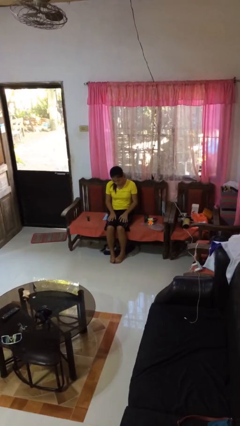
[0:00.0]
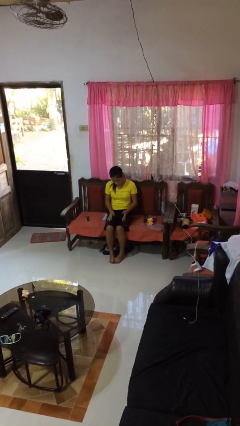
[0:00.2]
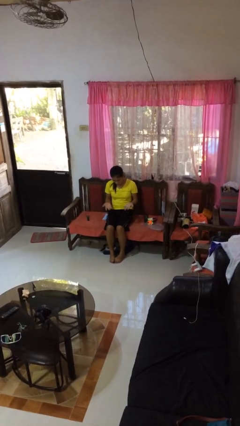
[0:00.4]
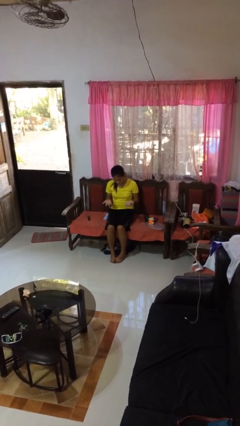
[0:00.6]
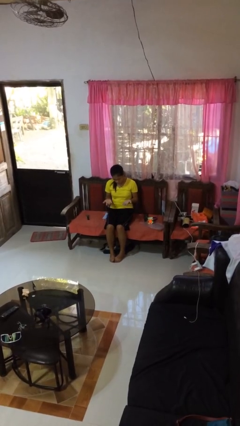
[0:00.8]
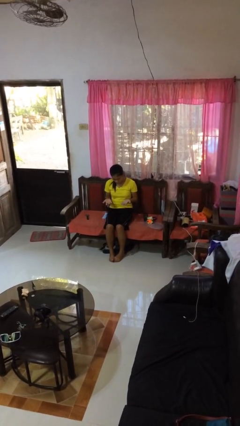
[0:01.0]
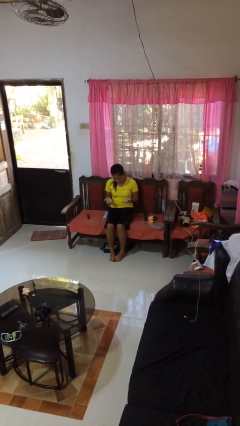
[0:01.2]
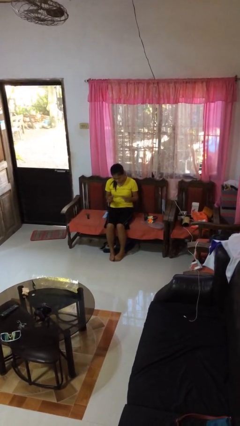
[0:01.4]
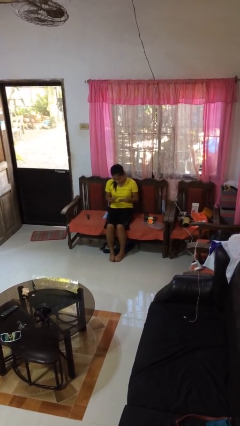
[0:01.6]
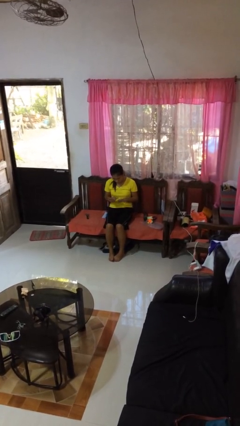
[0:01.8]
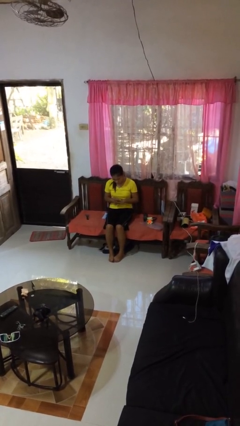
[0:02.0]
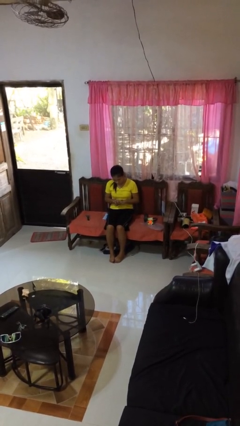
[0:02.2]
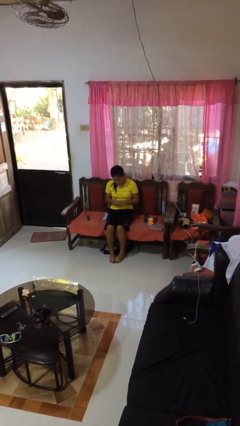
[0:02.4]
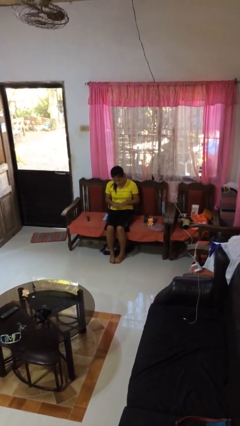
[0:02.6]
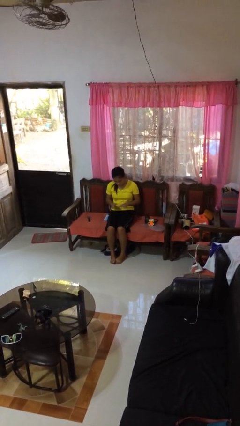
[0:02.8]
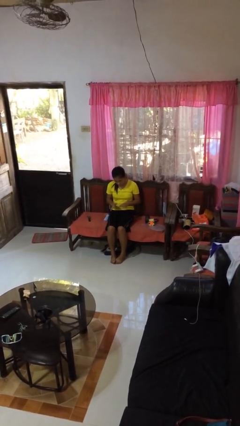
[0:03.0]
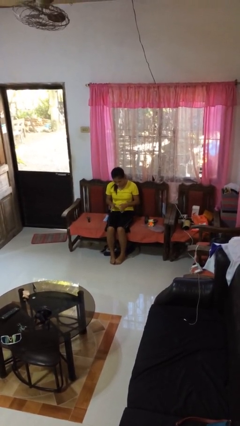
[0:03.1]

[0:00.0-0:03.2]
person looks at hands in lap

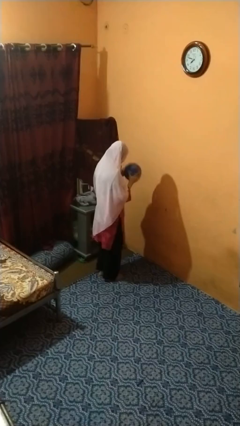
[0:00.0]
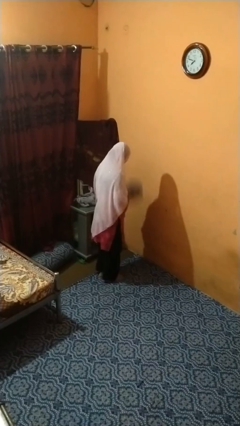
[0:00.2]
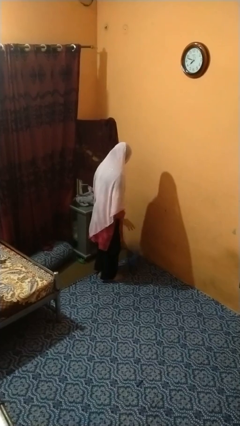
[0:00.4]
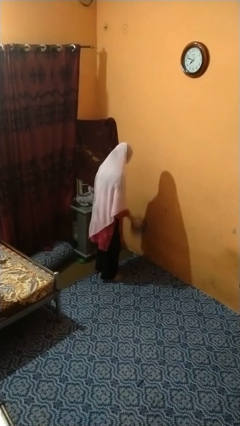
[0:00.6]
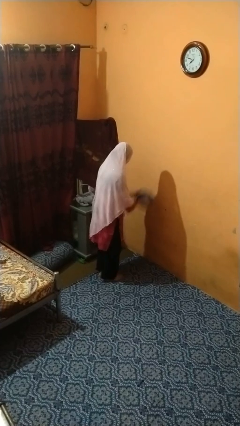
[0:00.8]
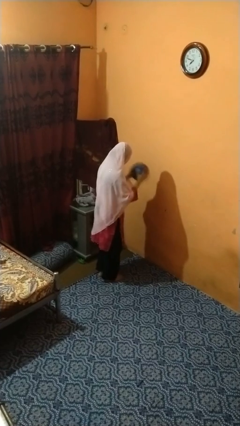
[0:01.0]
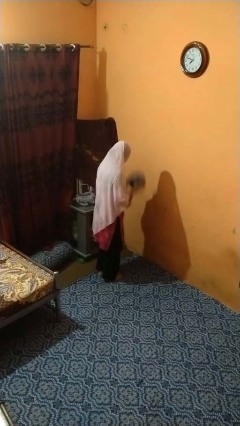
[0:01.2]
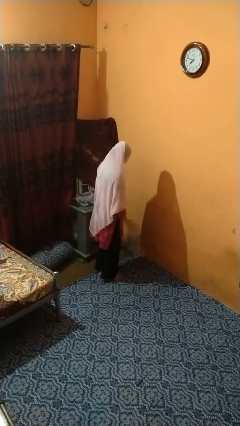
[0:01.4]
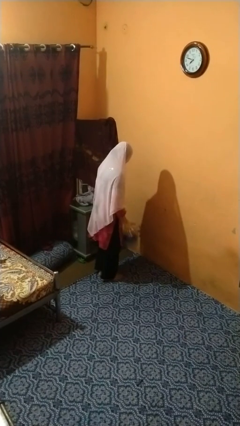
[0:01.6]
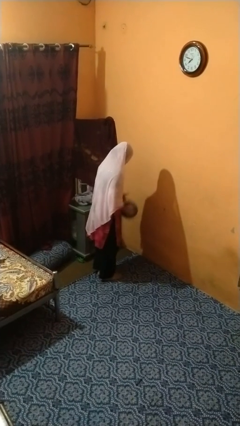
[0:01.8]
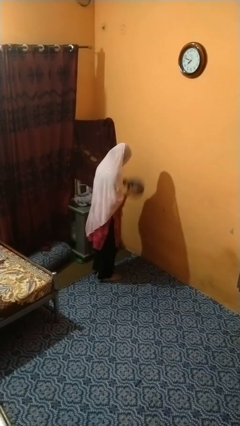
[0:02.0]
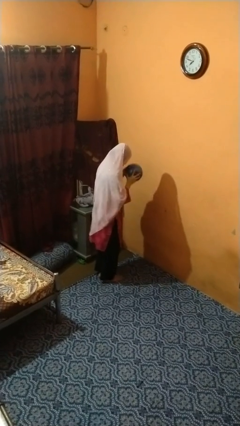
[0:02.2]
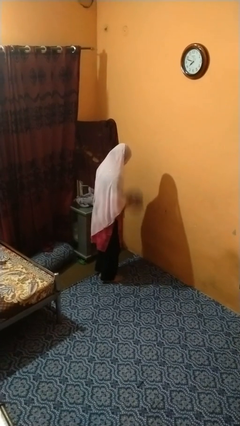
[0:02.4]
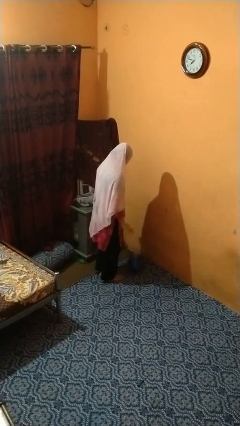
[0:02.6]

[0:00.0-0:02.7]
person bounces ball on floor

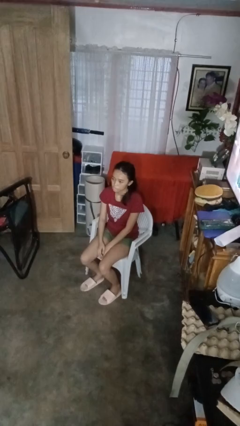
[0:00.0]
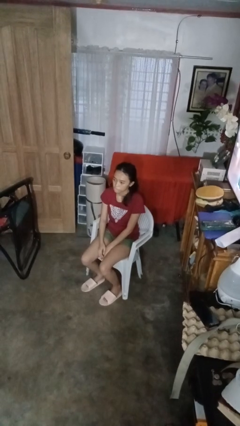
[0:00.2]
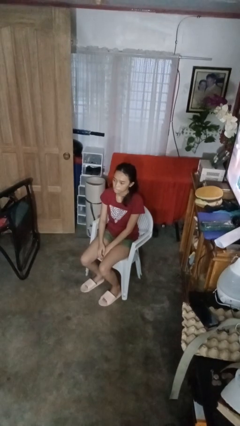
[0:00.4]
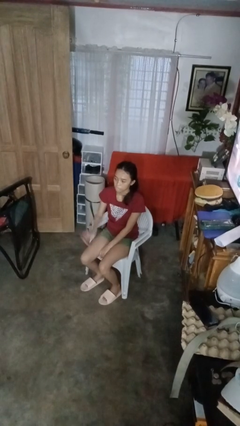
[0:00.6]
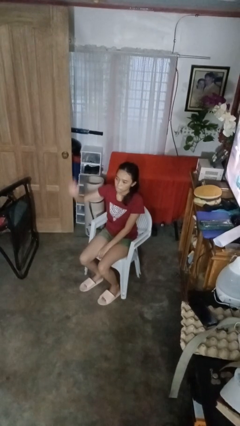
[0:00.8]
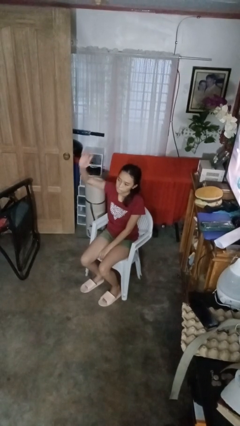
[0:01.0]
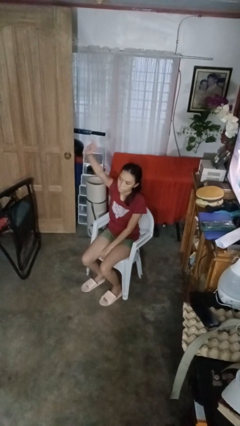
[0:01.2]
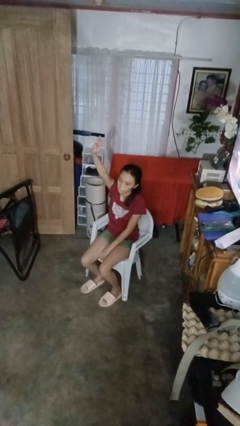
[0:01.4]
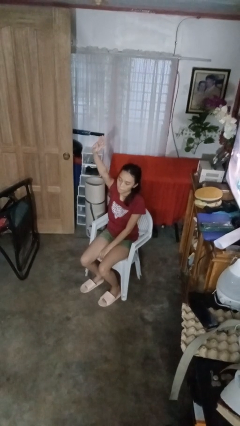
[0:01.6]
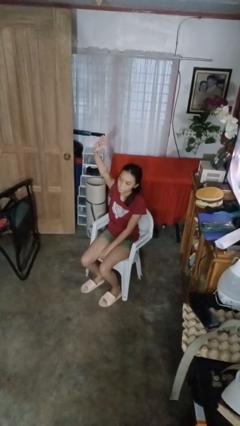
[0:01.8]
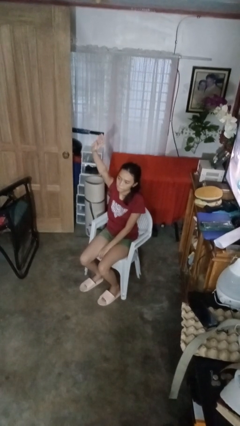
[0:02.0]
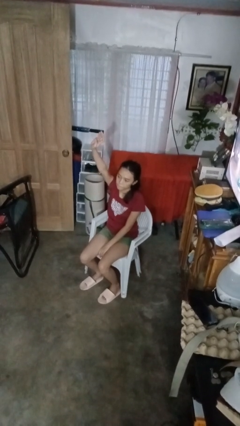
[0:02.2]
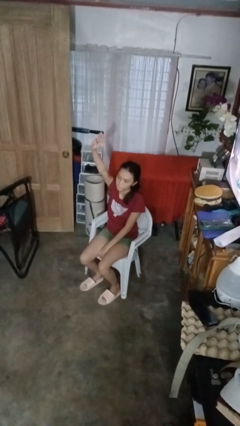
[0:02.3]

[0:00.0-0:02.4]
person gestures raise hand

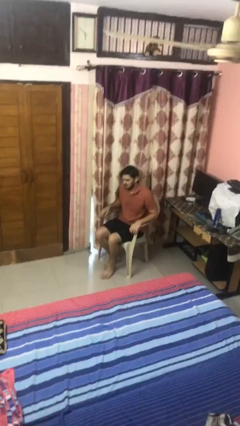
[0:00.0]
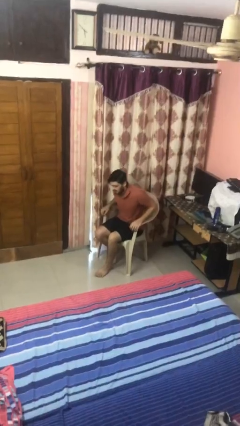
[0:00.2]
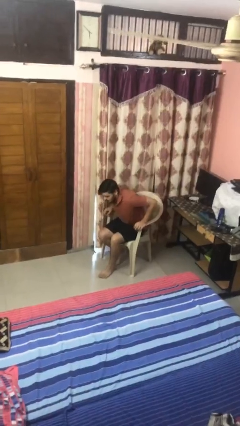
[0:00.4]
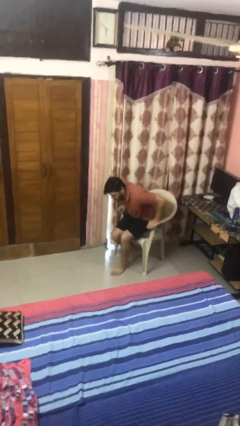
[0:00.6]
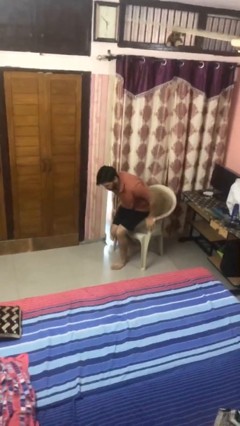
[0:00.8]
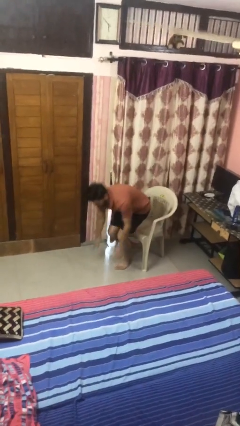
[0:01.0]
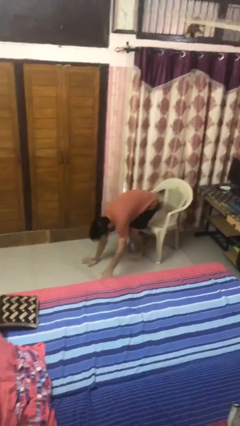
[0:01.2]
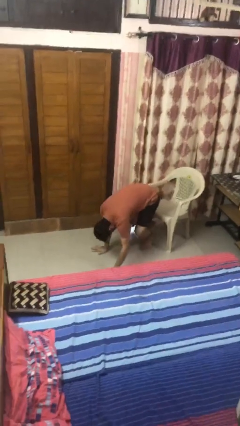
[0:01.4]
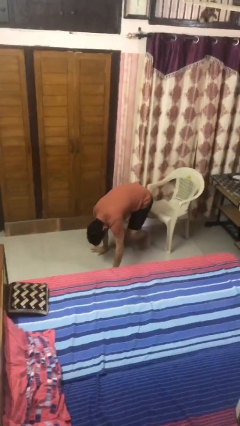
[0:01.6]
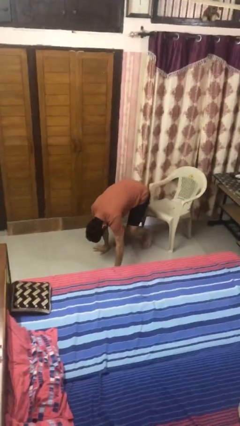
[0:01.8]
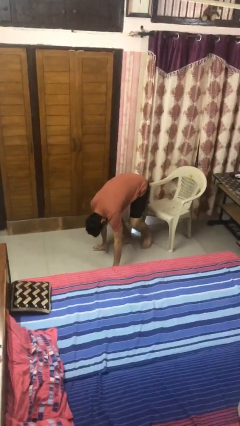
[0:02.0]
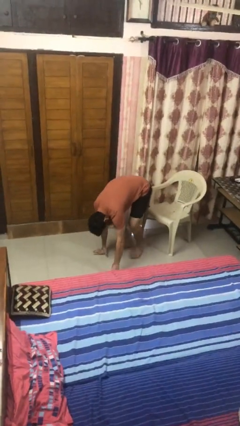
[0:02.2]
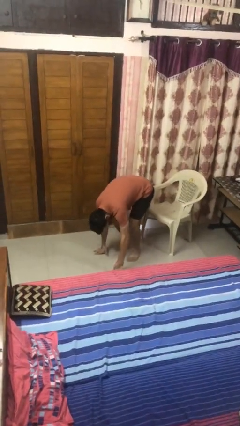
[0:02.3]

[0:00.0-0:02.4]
person falls from chair

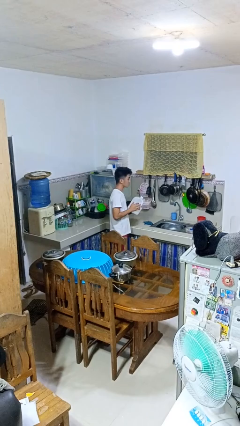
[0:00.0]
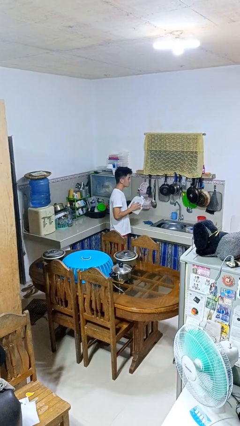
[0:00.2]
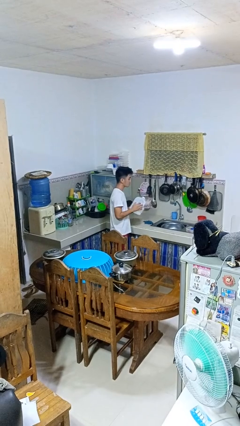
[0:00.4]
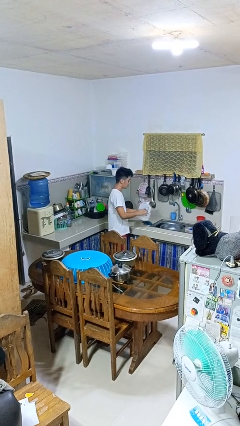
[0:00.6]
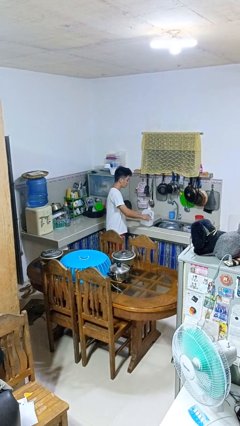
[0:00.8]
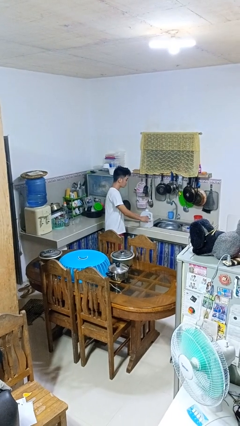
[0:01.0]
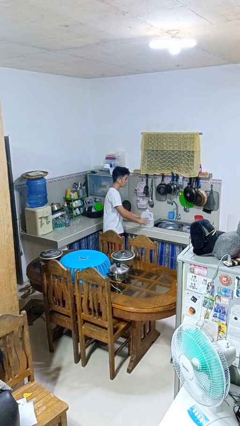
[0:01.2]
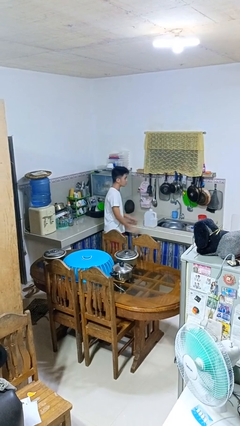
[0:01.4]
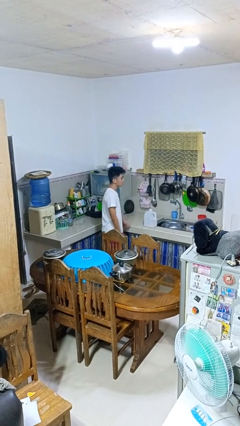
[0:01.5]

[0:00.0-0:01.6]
person puts down object on countertop

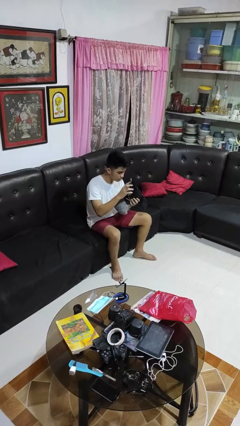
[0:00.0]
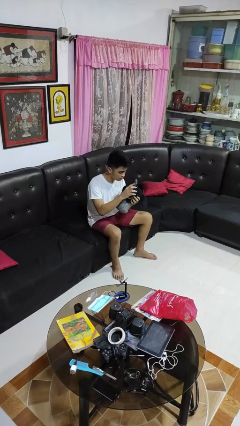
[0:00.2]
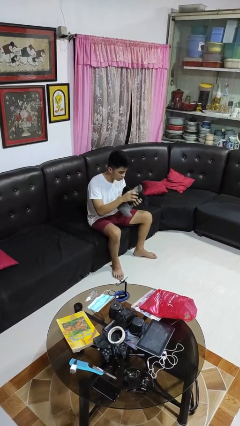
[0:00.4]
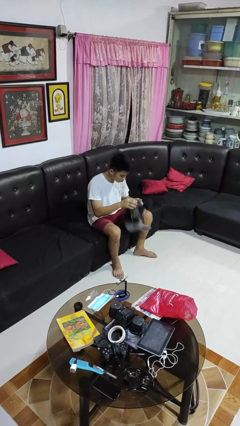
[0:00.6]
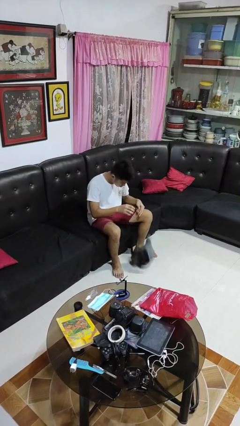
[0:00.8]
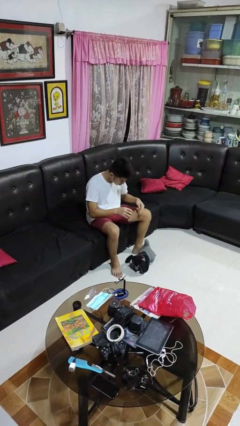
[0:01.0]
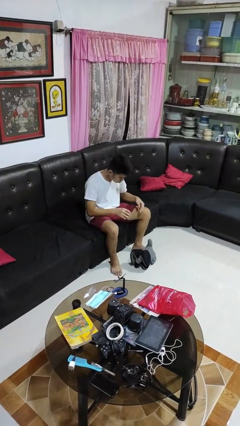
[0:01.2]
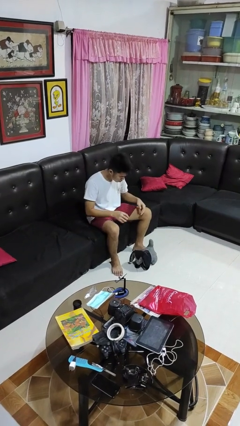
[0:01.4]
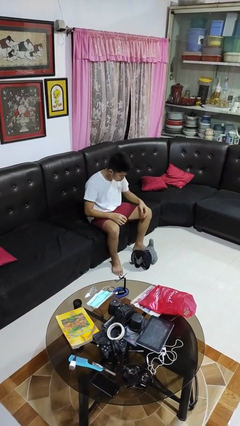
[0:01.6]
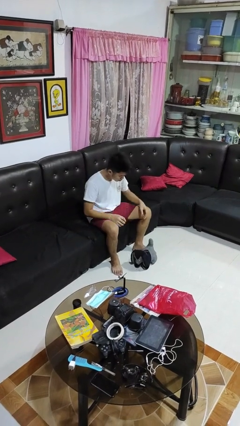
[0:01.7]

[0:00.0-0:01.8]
person drops object

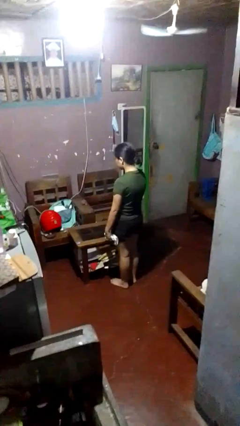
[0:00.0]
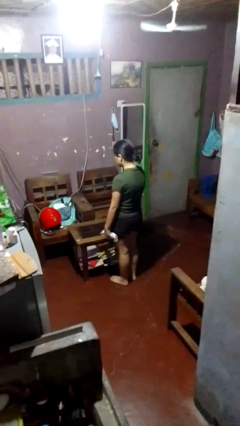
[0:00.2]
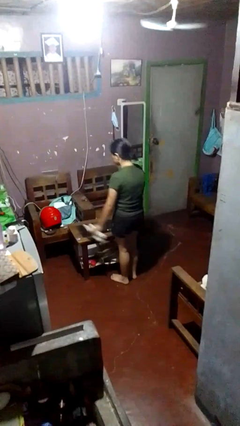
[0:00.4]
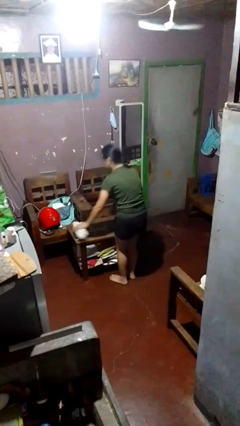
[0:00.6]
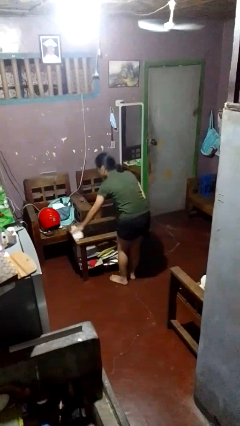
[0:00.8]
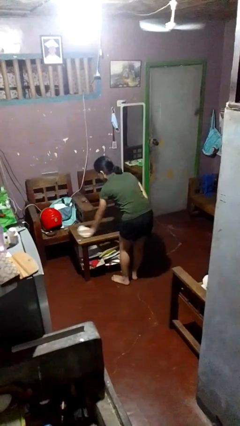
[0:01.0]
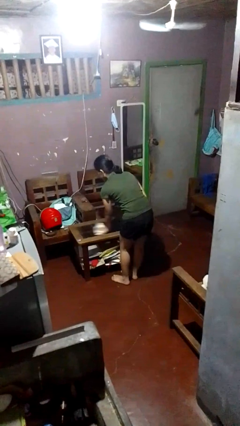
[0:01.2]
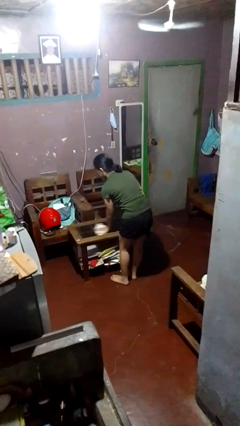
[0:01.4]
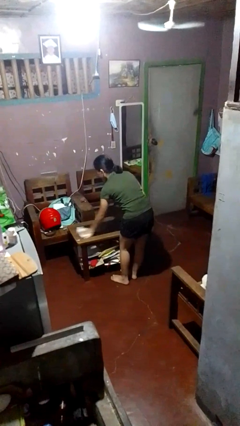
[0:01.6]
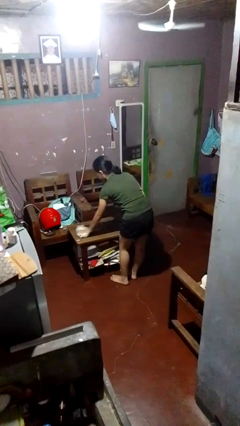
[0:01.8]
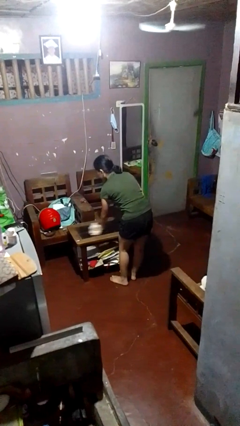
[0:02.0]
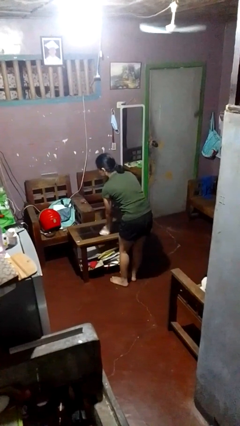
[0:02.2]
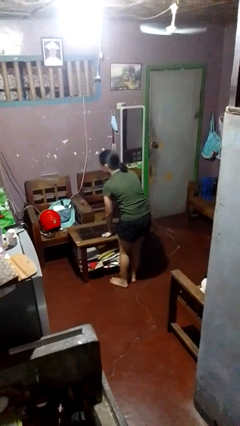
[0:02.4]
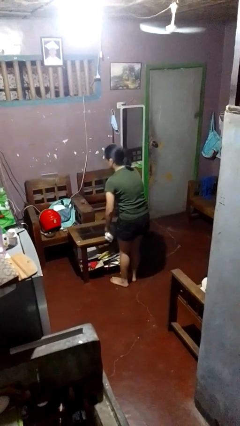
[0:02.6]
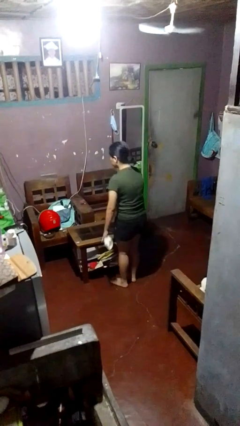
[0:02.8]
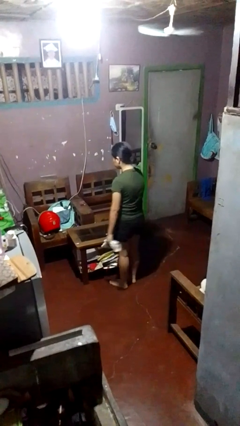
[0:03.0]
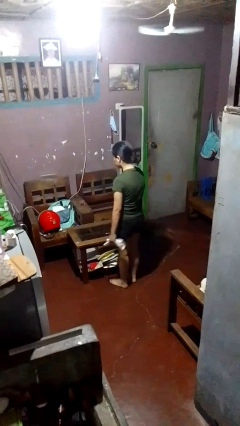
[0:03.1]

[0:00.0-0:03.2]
person cleans table with rag
